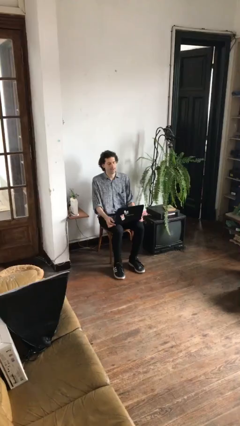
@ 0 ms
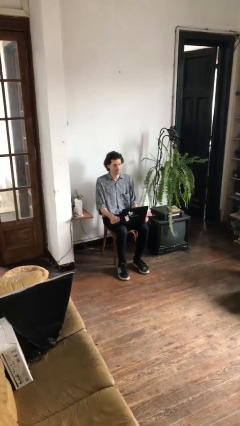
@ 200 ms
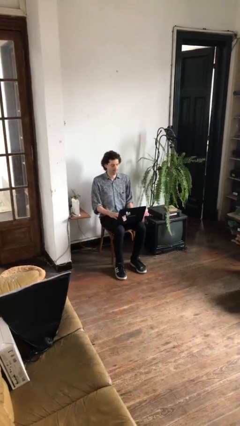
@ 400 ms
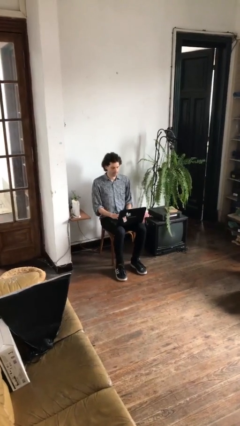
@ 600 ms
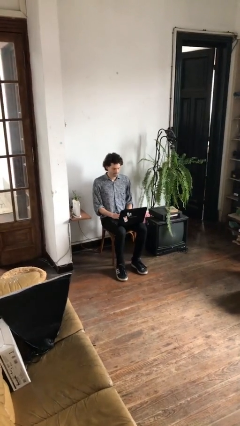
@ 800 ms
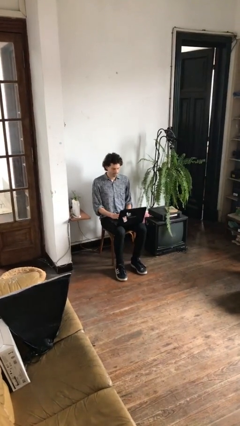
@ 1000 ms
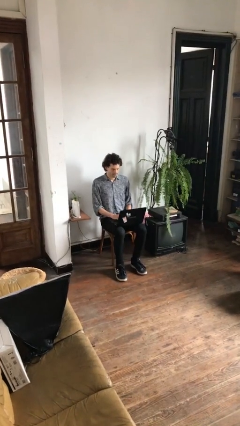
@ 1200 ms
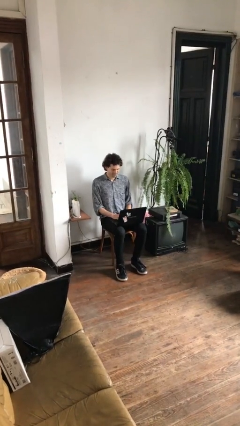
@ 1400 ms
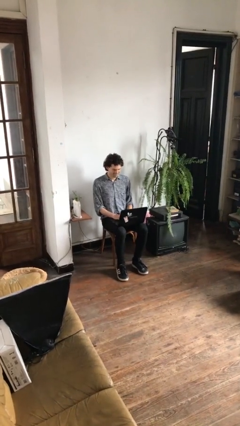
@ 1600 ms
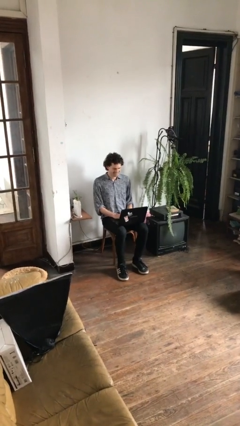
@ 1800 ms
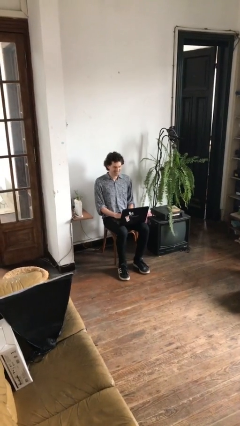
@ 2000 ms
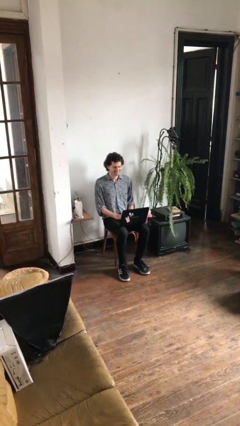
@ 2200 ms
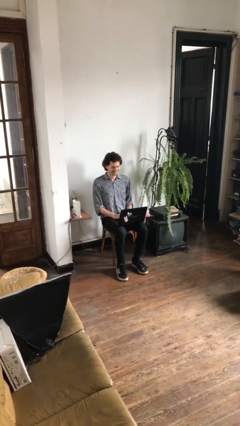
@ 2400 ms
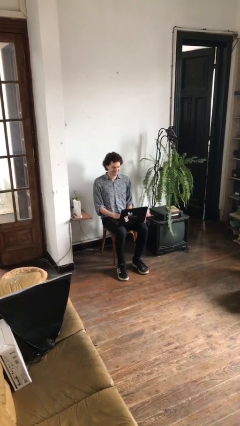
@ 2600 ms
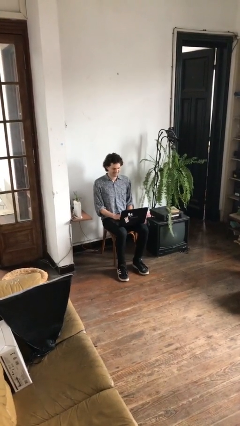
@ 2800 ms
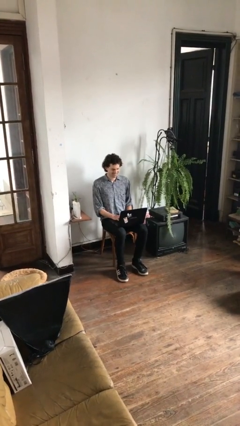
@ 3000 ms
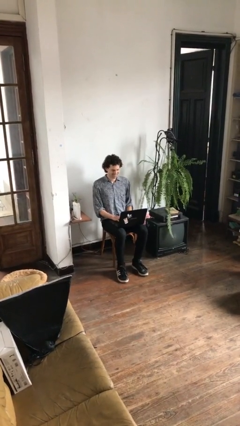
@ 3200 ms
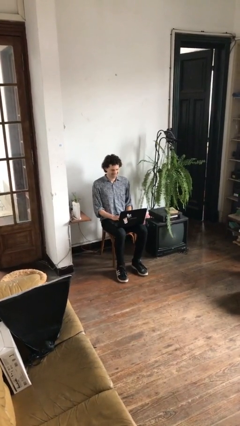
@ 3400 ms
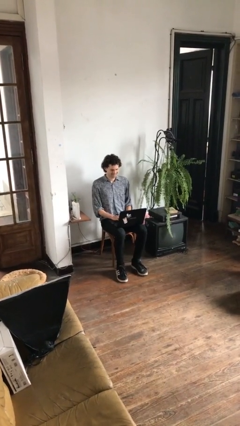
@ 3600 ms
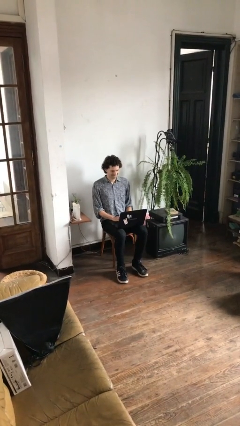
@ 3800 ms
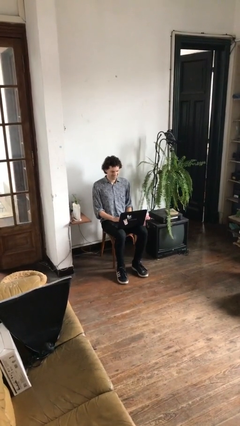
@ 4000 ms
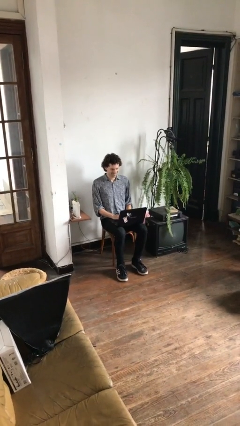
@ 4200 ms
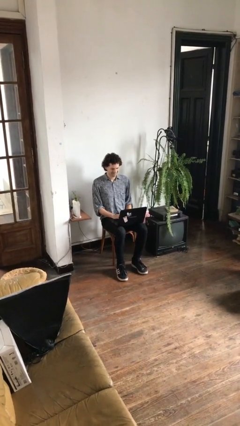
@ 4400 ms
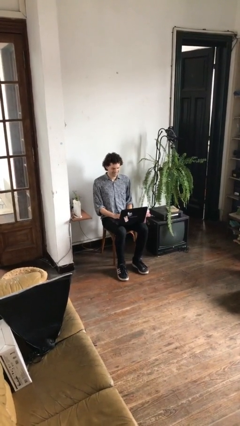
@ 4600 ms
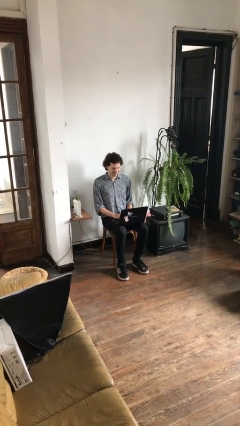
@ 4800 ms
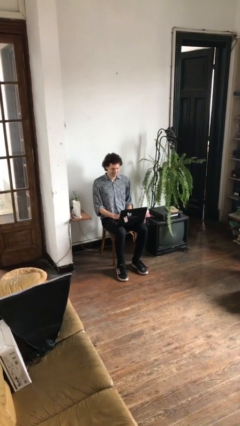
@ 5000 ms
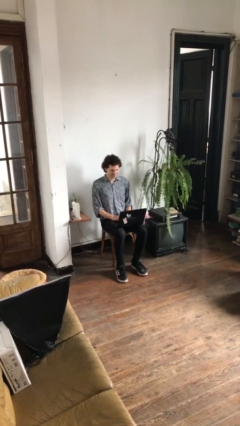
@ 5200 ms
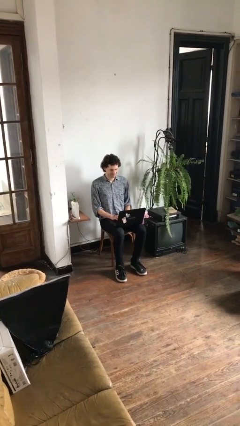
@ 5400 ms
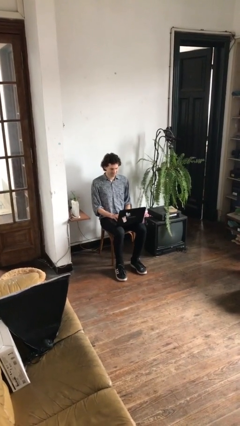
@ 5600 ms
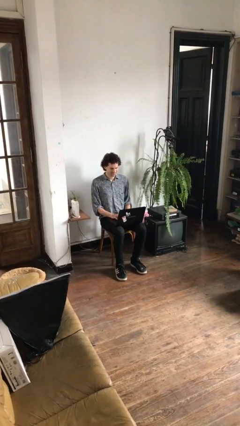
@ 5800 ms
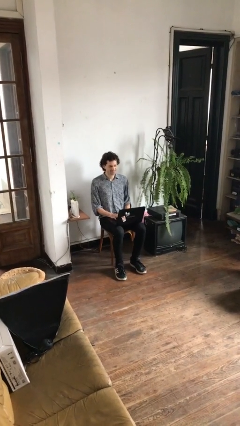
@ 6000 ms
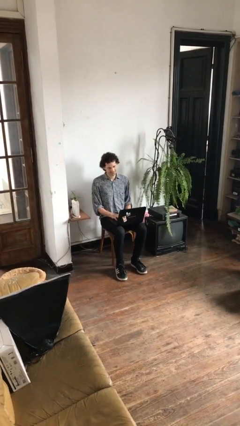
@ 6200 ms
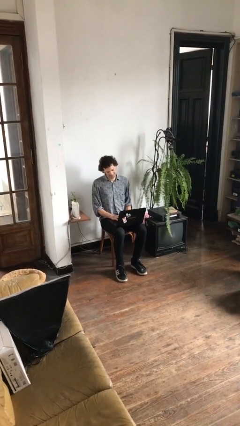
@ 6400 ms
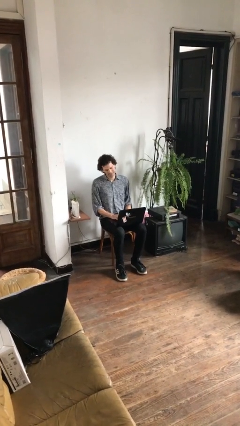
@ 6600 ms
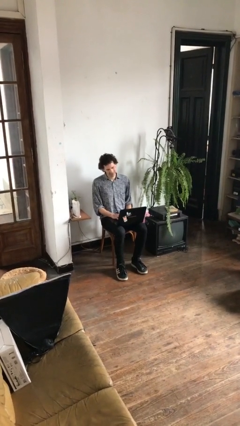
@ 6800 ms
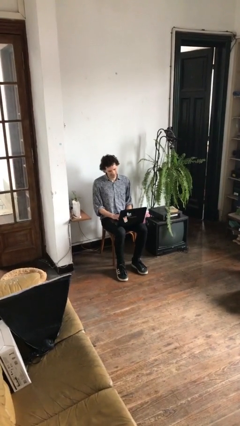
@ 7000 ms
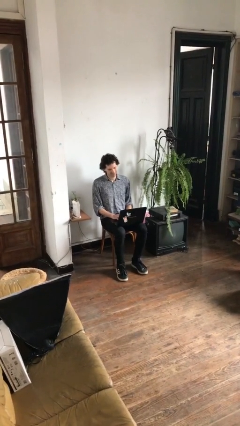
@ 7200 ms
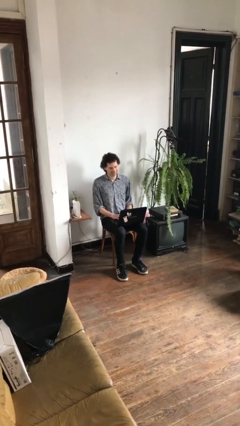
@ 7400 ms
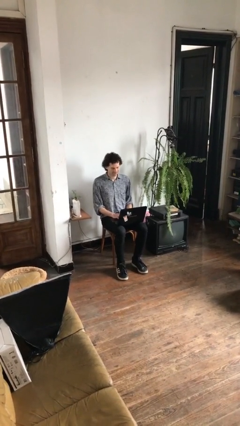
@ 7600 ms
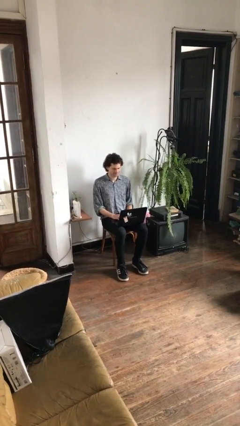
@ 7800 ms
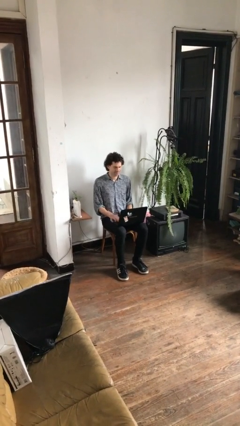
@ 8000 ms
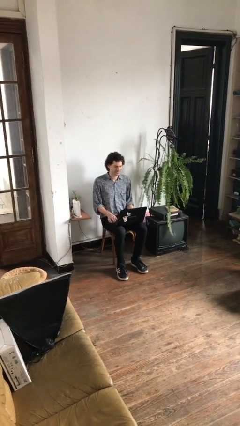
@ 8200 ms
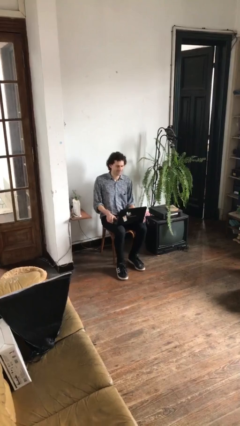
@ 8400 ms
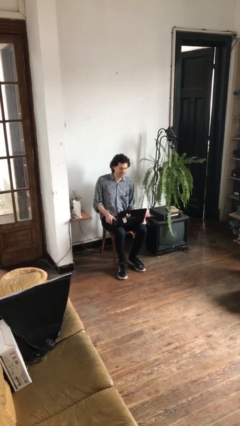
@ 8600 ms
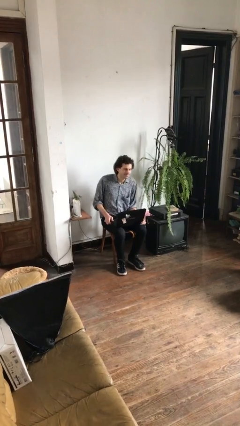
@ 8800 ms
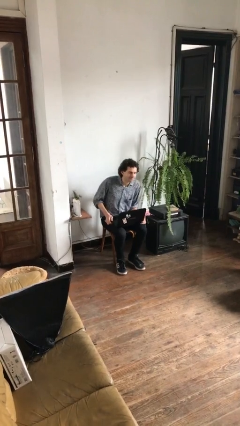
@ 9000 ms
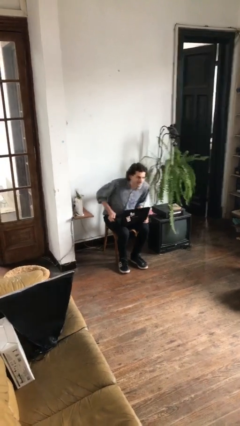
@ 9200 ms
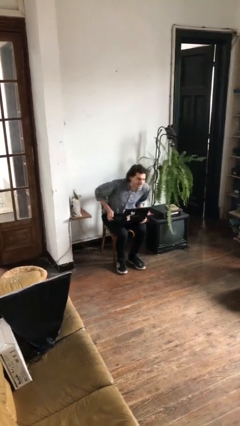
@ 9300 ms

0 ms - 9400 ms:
person interacts with laptop

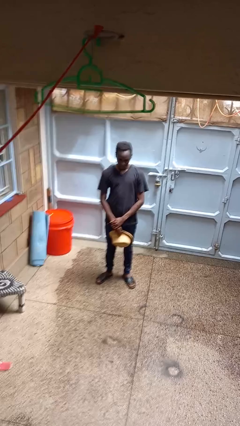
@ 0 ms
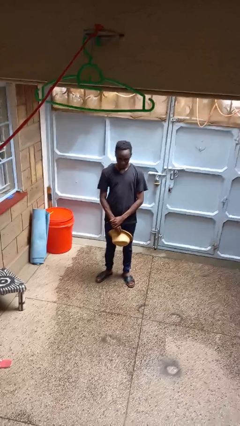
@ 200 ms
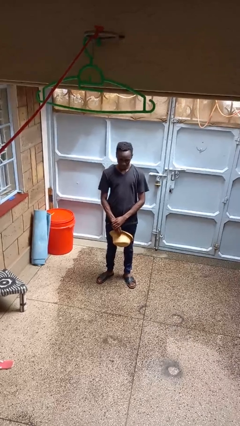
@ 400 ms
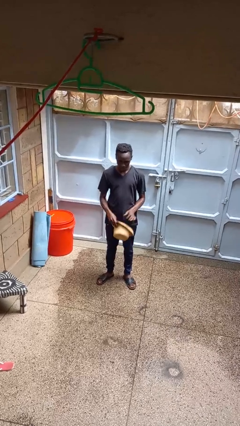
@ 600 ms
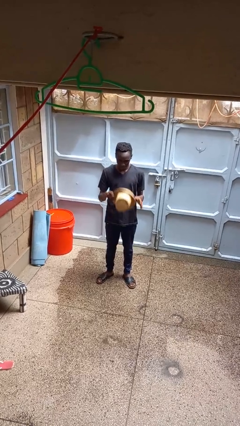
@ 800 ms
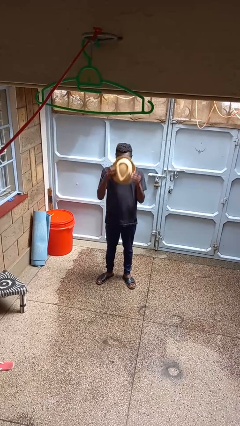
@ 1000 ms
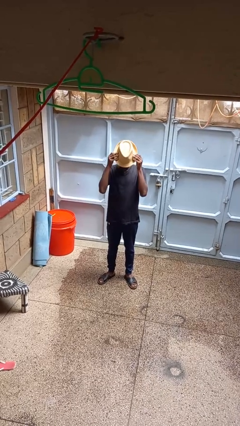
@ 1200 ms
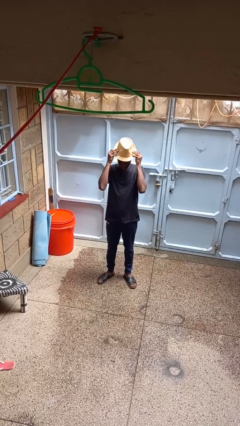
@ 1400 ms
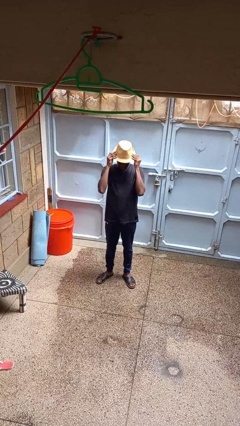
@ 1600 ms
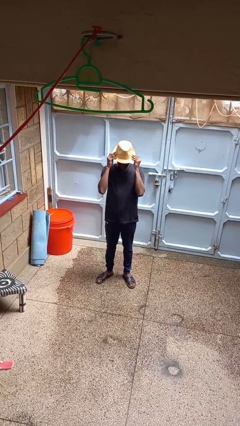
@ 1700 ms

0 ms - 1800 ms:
person puts on hat

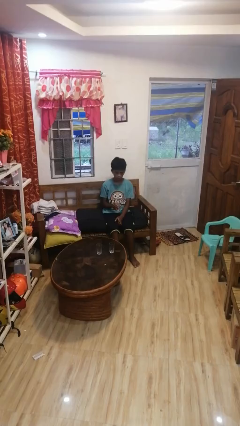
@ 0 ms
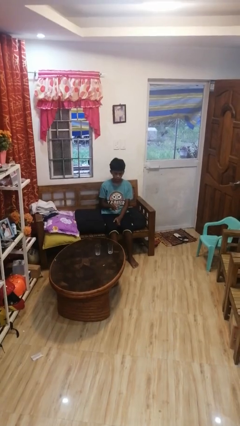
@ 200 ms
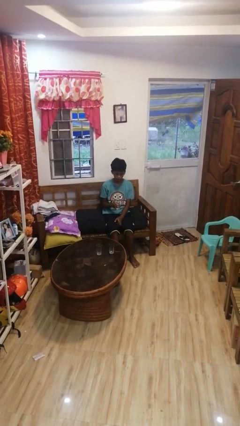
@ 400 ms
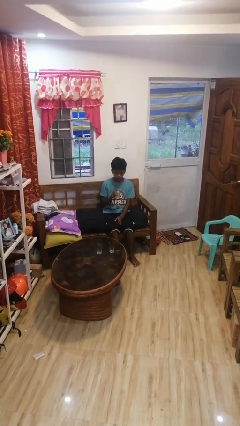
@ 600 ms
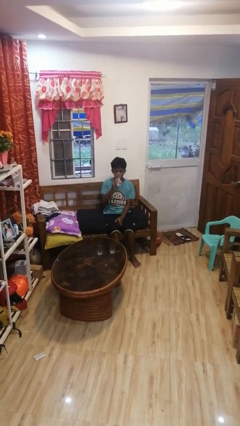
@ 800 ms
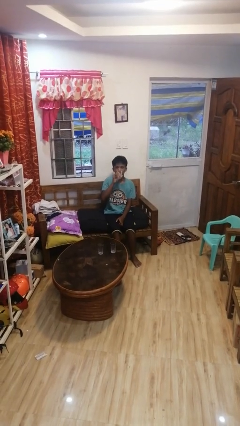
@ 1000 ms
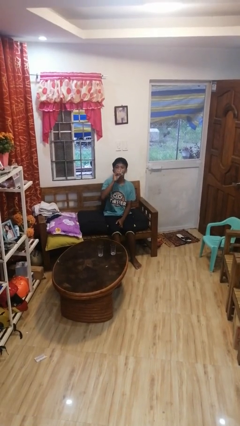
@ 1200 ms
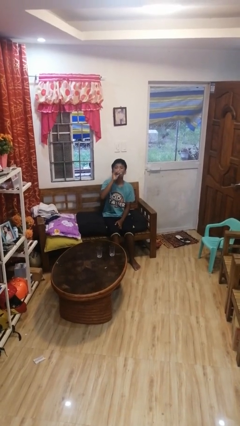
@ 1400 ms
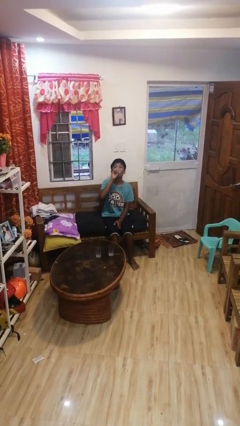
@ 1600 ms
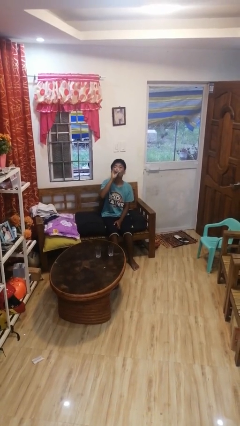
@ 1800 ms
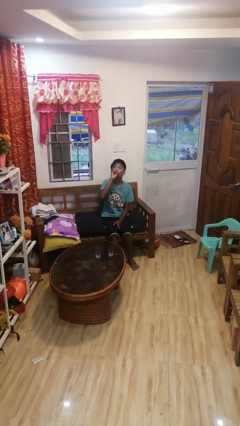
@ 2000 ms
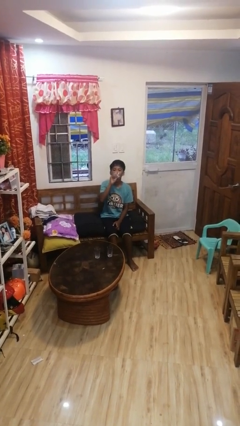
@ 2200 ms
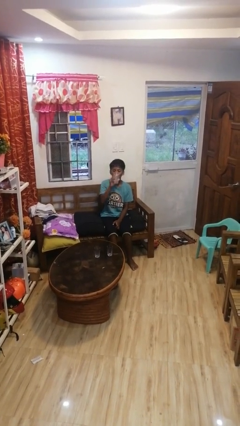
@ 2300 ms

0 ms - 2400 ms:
person drinks from shotglass

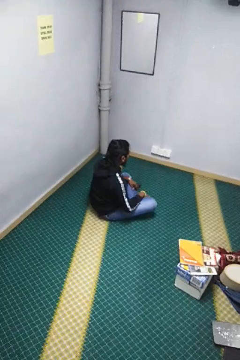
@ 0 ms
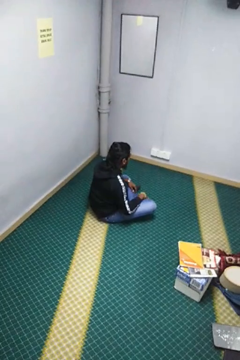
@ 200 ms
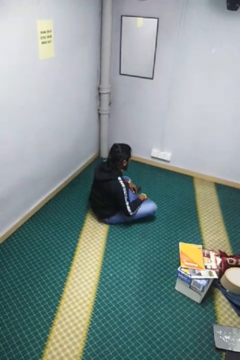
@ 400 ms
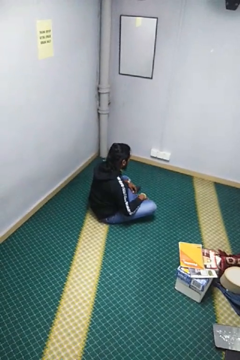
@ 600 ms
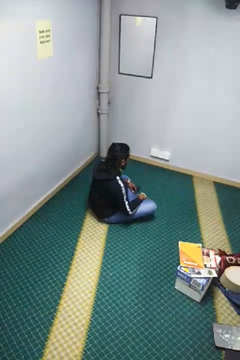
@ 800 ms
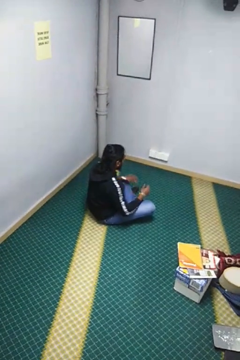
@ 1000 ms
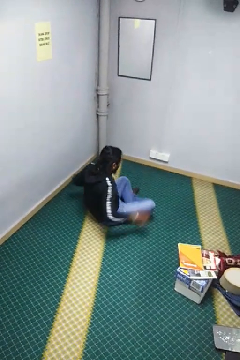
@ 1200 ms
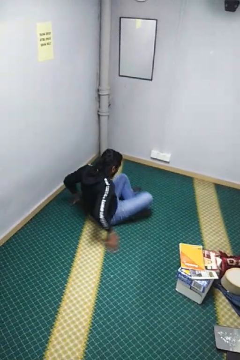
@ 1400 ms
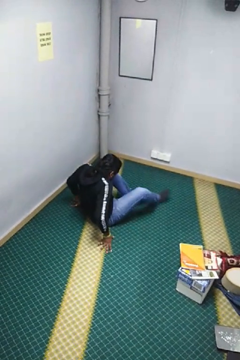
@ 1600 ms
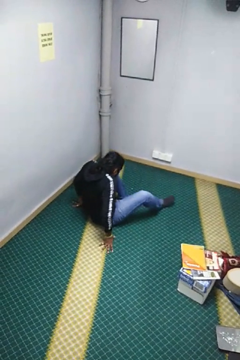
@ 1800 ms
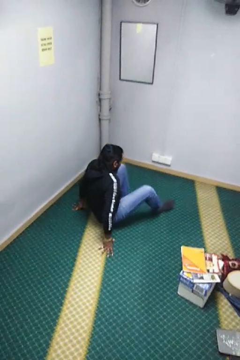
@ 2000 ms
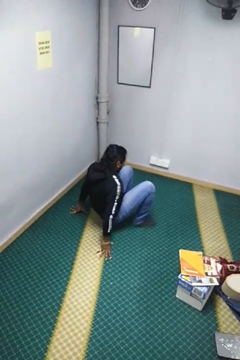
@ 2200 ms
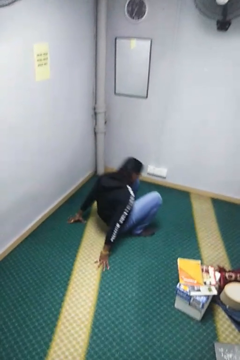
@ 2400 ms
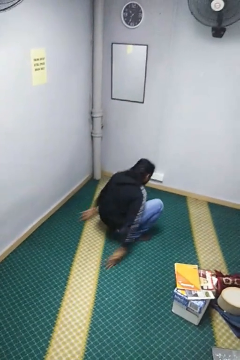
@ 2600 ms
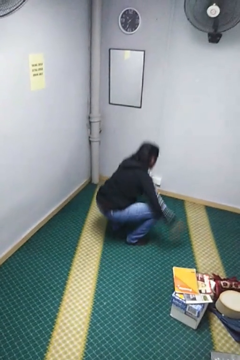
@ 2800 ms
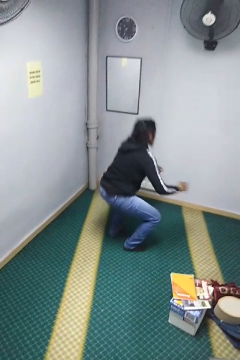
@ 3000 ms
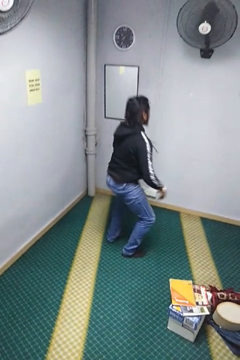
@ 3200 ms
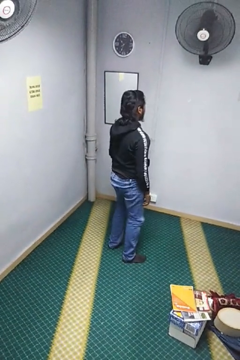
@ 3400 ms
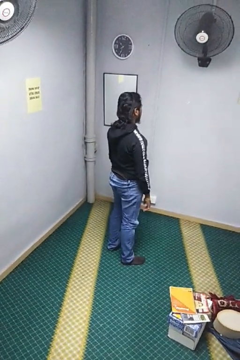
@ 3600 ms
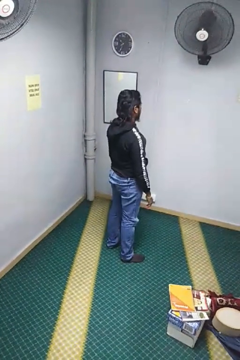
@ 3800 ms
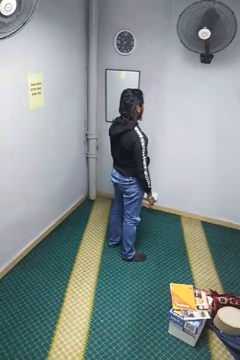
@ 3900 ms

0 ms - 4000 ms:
person stands up from floor

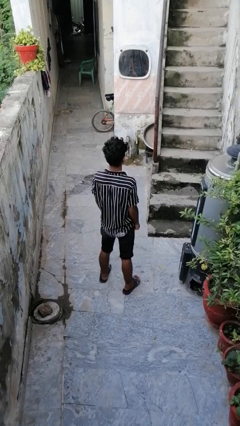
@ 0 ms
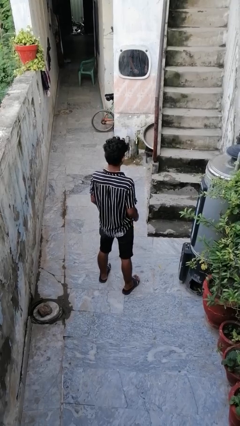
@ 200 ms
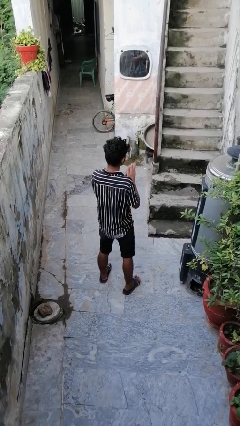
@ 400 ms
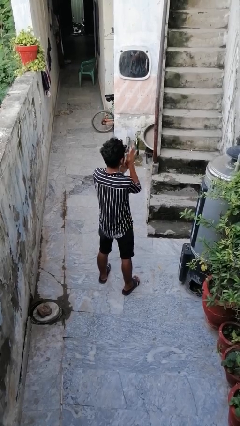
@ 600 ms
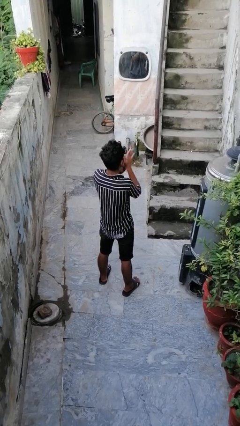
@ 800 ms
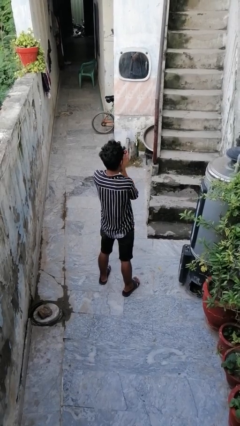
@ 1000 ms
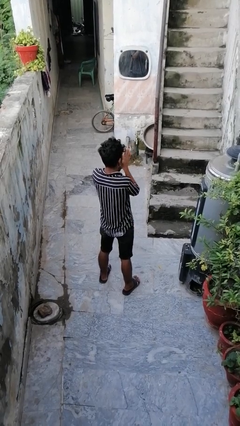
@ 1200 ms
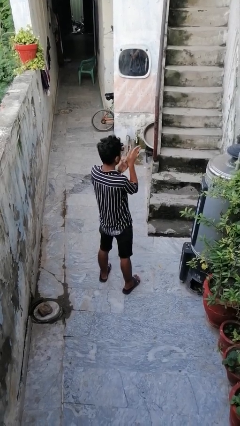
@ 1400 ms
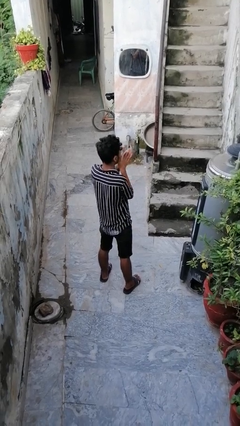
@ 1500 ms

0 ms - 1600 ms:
person blows into hands
